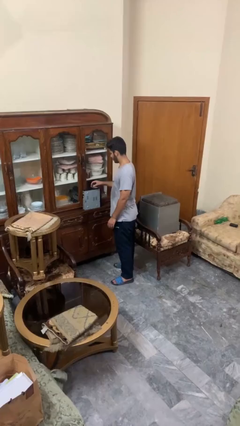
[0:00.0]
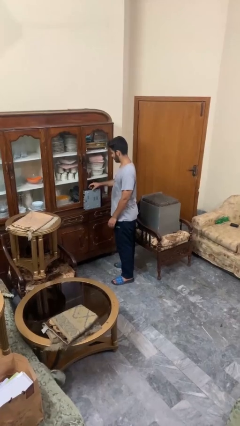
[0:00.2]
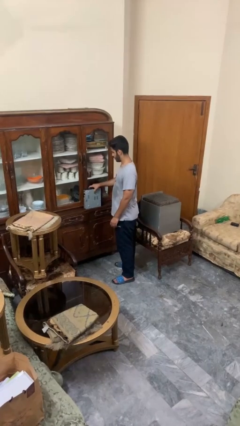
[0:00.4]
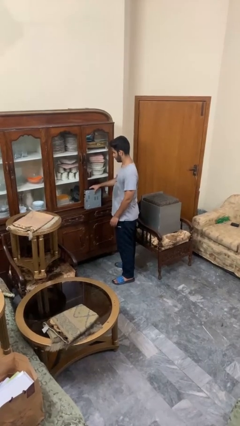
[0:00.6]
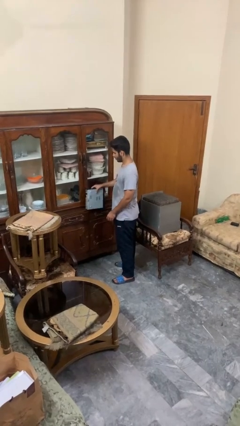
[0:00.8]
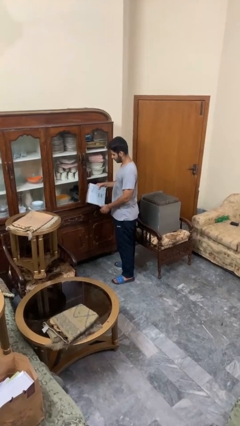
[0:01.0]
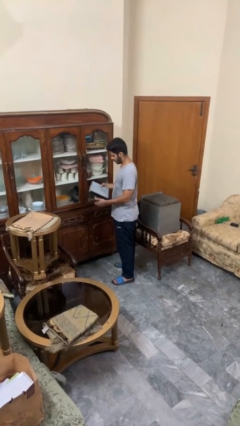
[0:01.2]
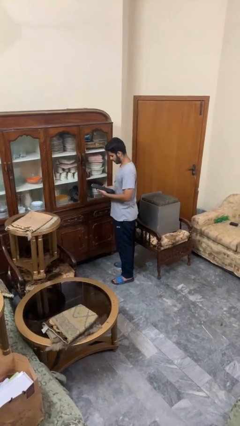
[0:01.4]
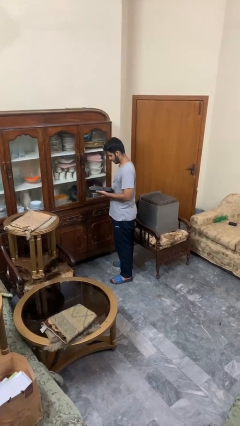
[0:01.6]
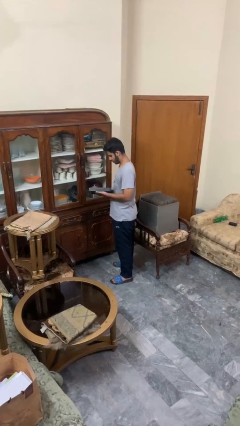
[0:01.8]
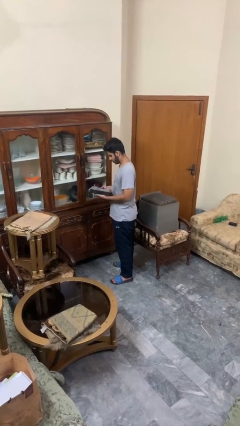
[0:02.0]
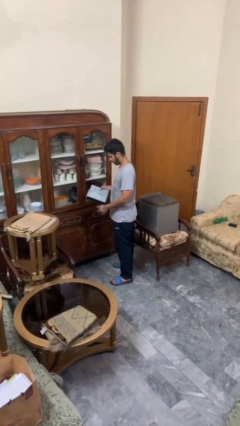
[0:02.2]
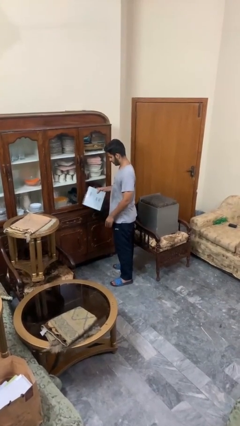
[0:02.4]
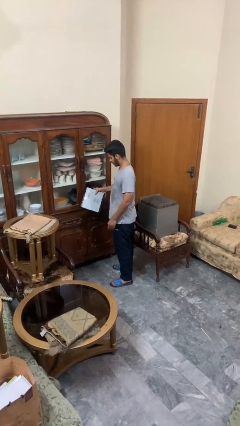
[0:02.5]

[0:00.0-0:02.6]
person picks up object from countertop

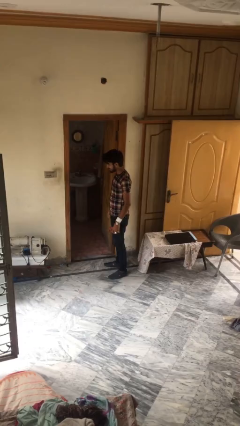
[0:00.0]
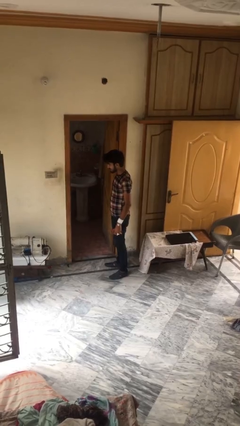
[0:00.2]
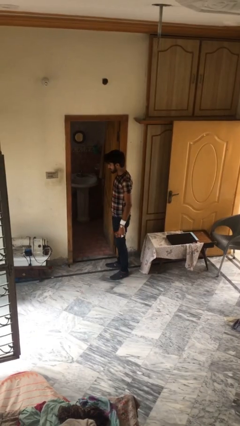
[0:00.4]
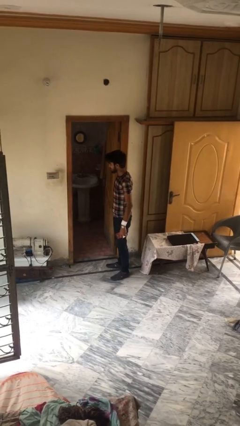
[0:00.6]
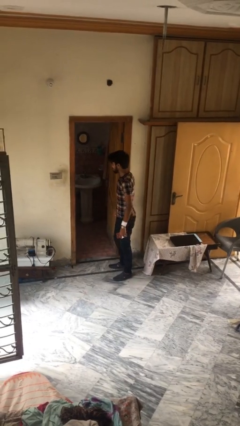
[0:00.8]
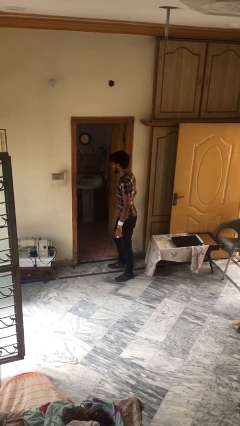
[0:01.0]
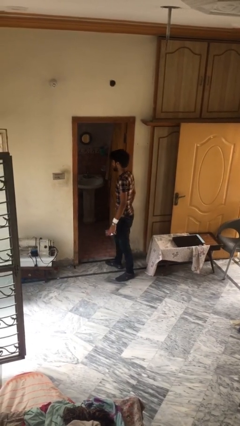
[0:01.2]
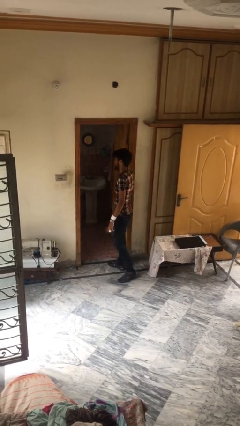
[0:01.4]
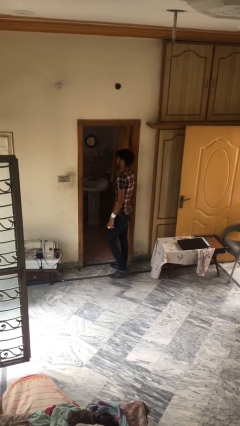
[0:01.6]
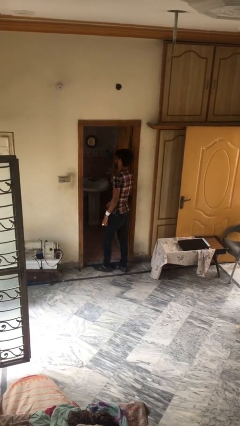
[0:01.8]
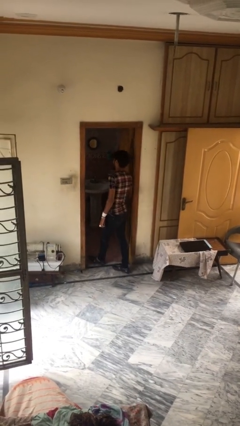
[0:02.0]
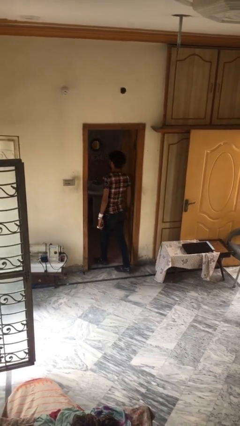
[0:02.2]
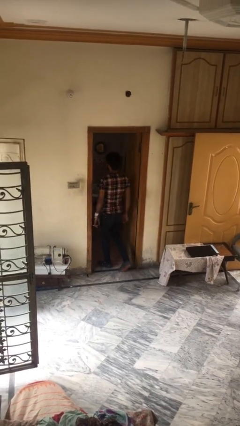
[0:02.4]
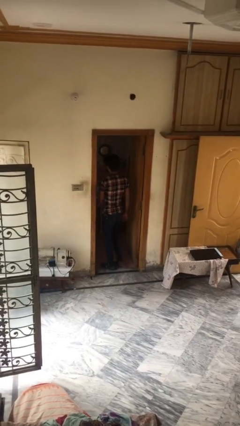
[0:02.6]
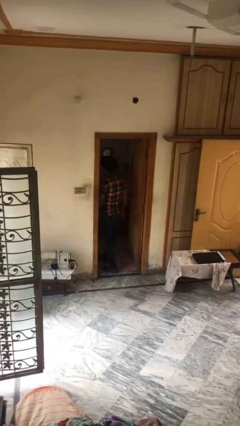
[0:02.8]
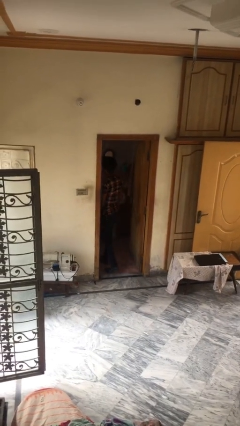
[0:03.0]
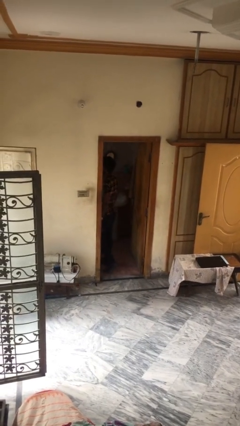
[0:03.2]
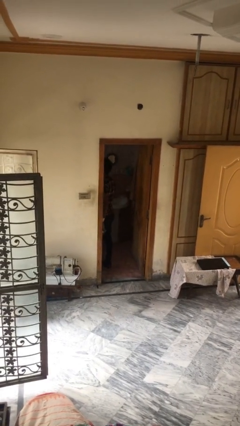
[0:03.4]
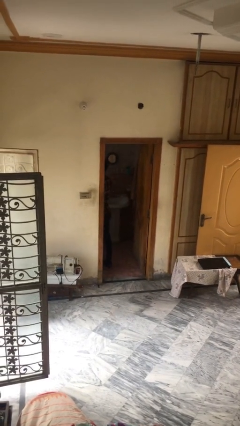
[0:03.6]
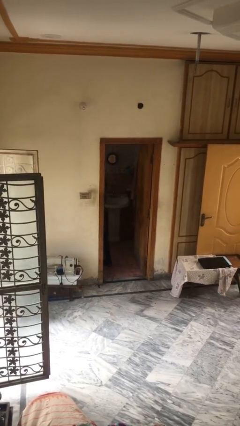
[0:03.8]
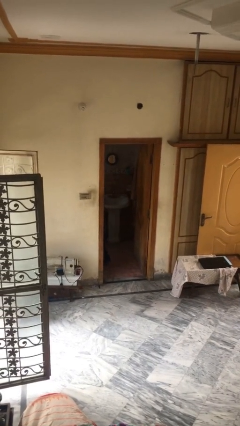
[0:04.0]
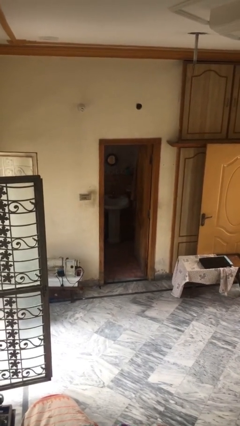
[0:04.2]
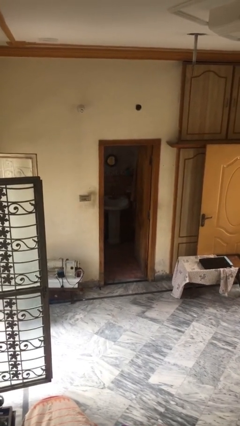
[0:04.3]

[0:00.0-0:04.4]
person exits scene through structure

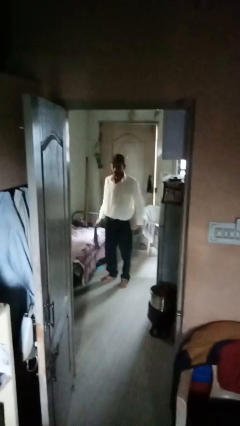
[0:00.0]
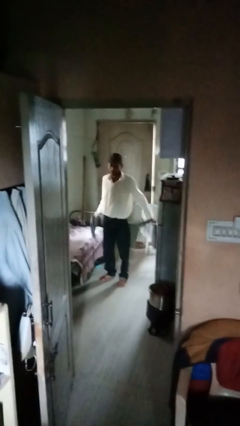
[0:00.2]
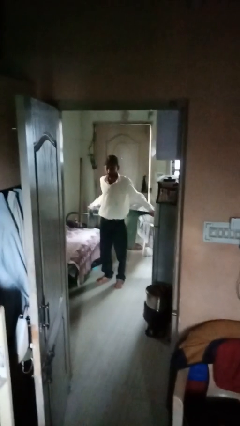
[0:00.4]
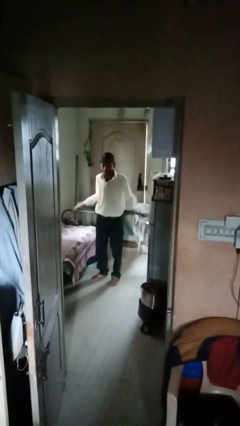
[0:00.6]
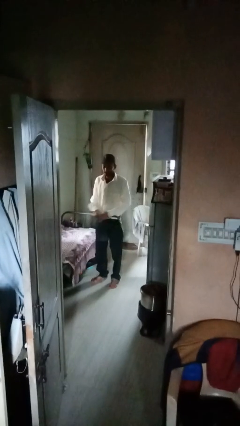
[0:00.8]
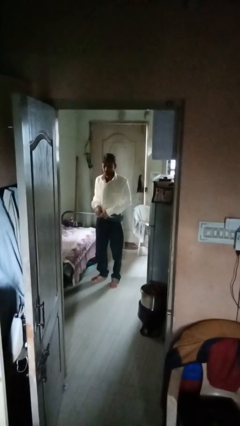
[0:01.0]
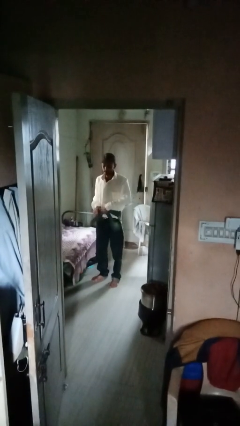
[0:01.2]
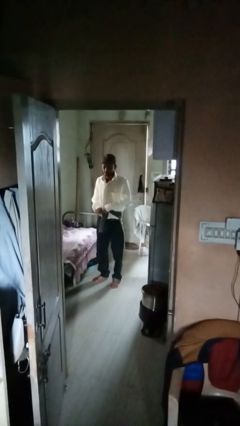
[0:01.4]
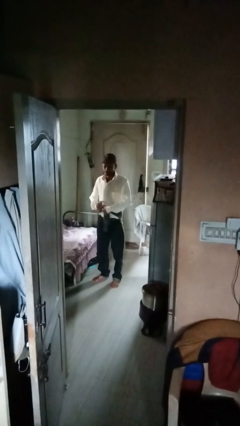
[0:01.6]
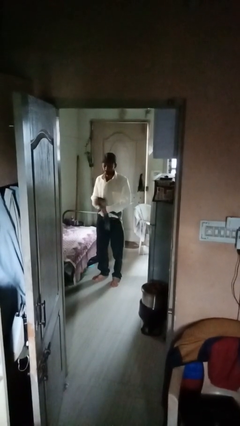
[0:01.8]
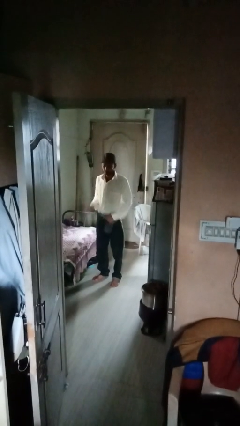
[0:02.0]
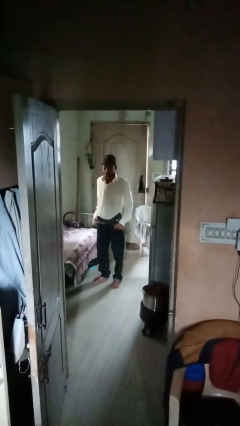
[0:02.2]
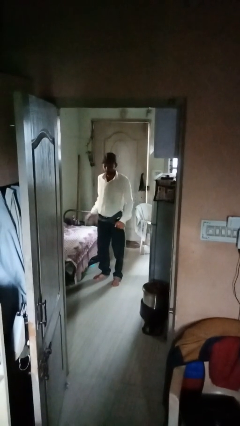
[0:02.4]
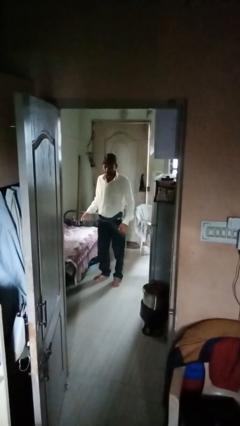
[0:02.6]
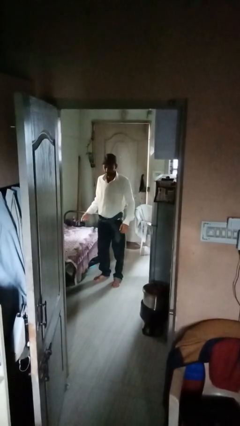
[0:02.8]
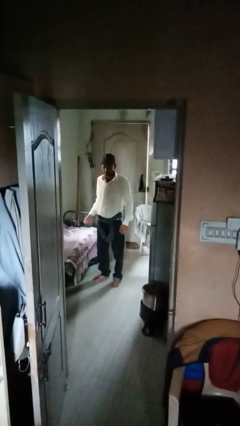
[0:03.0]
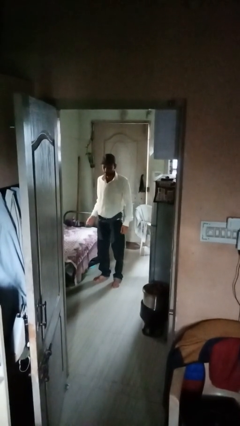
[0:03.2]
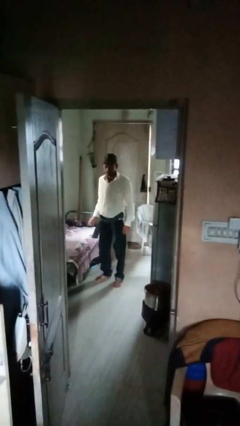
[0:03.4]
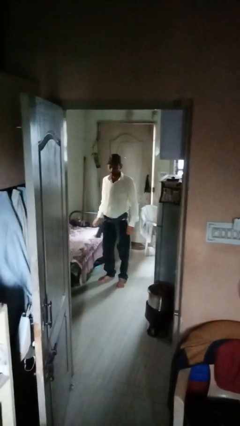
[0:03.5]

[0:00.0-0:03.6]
person ties jacket around waist

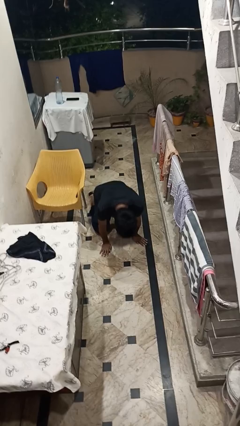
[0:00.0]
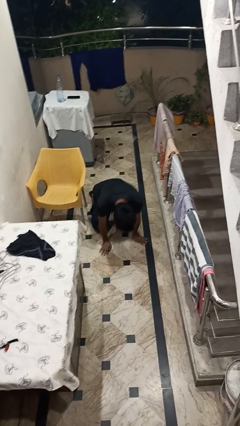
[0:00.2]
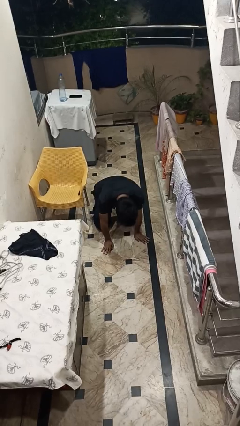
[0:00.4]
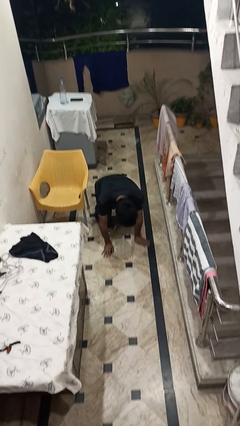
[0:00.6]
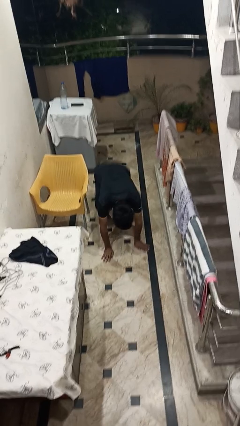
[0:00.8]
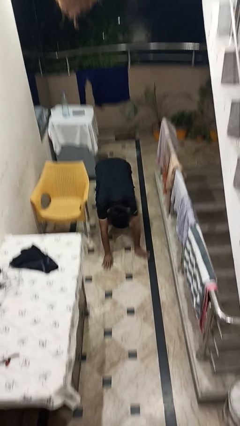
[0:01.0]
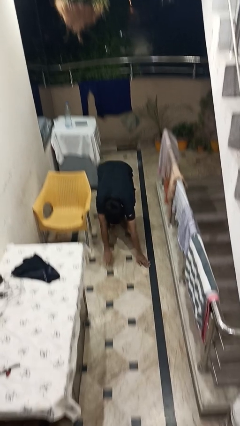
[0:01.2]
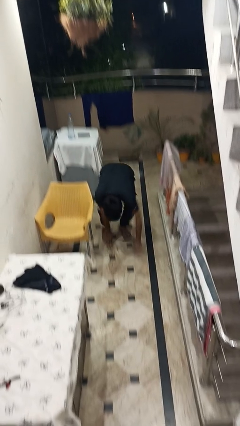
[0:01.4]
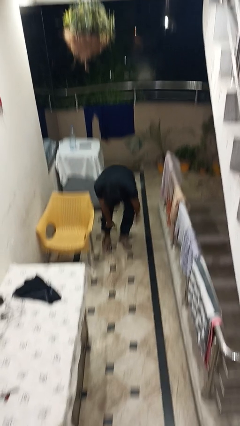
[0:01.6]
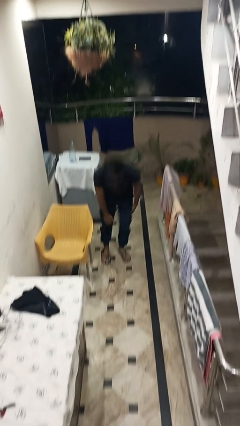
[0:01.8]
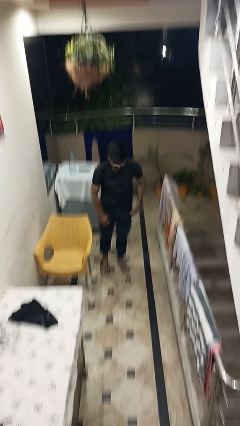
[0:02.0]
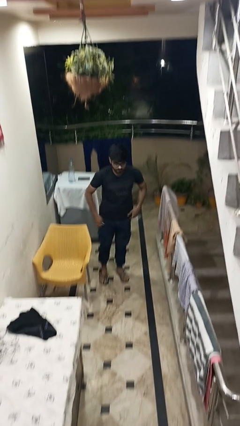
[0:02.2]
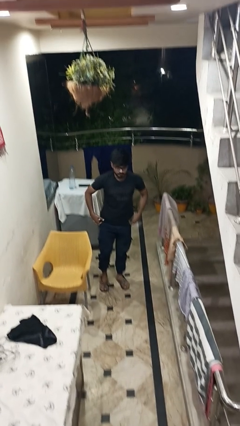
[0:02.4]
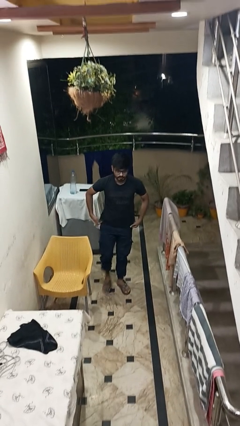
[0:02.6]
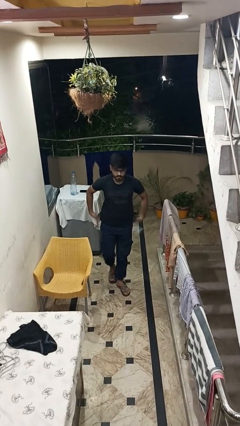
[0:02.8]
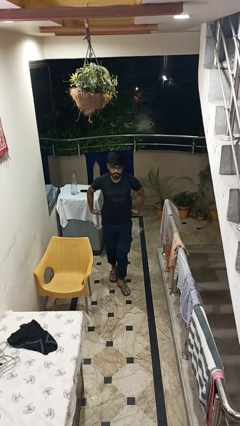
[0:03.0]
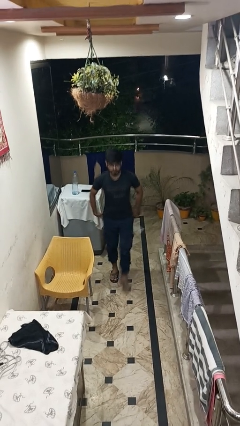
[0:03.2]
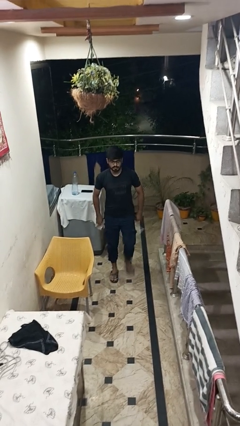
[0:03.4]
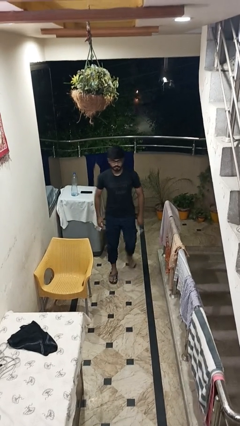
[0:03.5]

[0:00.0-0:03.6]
person stands up from floor

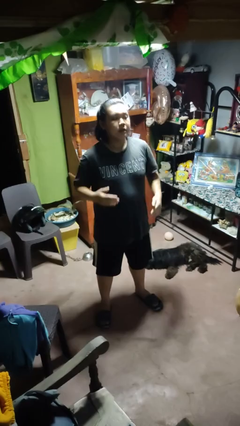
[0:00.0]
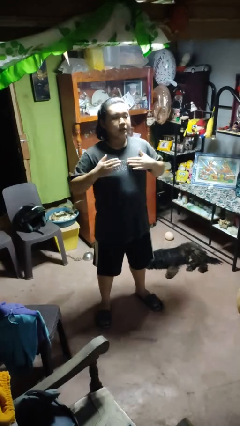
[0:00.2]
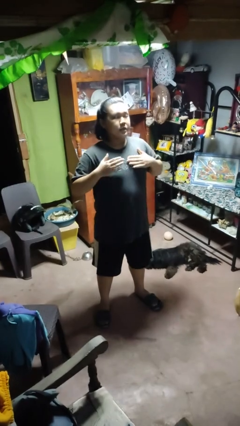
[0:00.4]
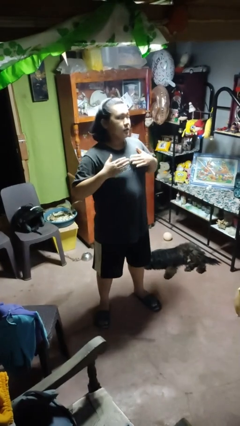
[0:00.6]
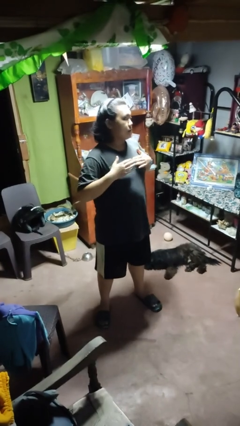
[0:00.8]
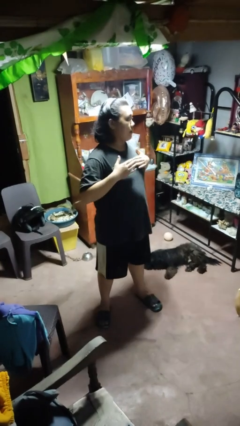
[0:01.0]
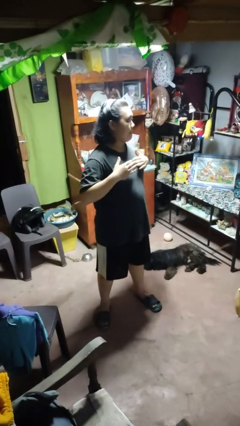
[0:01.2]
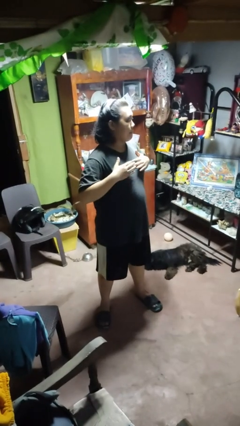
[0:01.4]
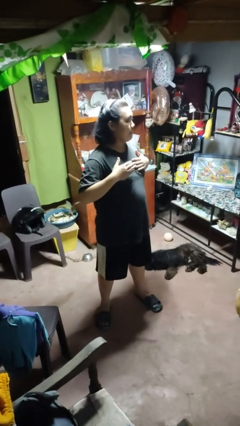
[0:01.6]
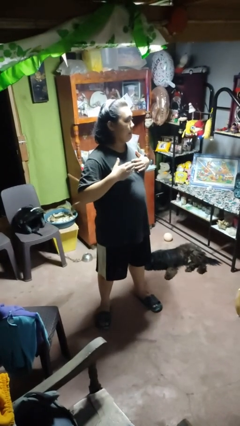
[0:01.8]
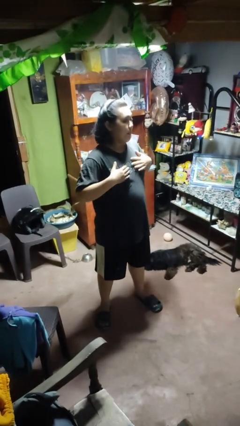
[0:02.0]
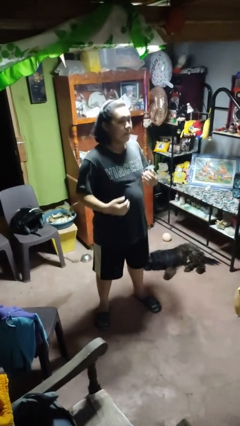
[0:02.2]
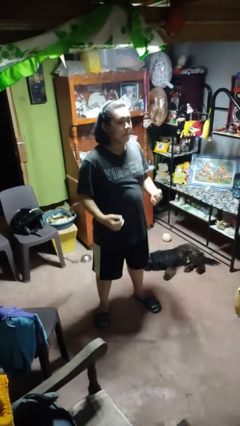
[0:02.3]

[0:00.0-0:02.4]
person drums on chest

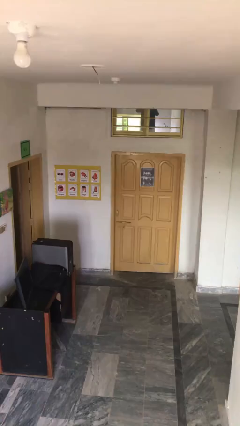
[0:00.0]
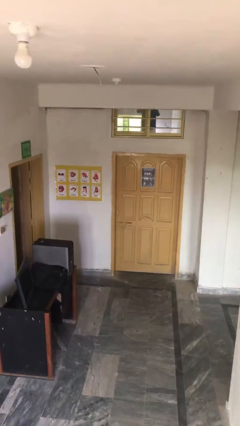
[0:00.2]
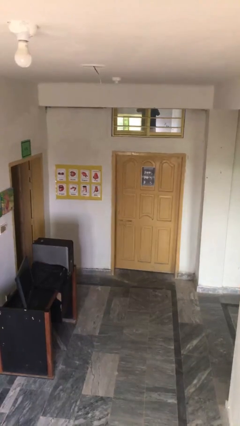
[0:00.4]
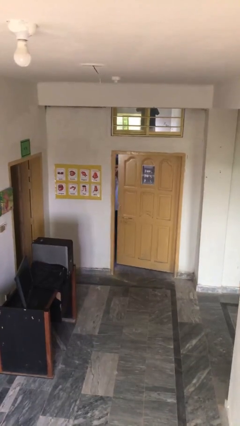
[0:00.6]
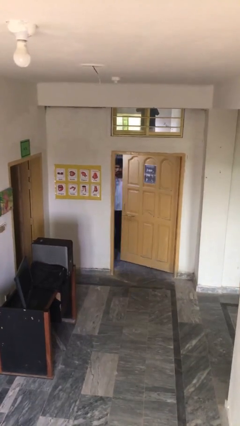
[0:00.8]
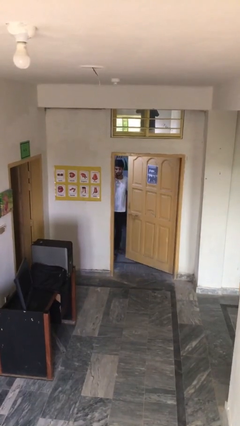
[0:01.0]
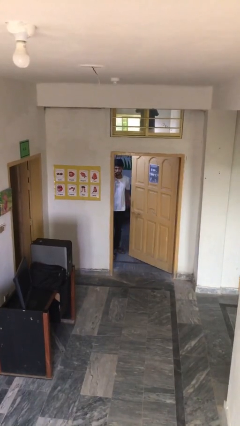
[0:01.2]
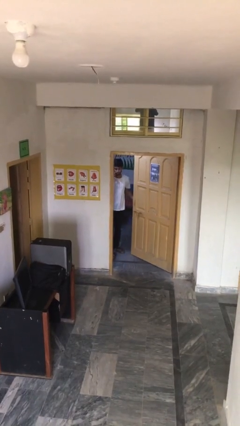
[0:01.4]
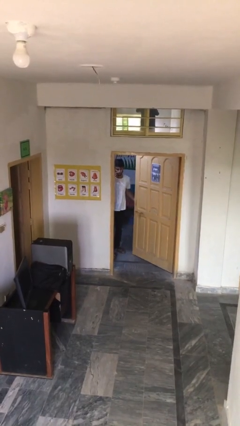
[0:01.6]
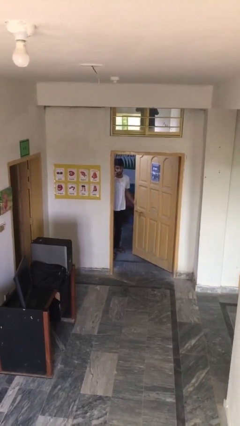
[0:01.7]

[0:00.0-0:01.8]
person opens facility door
